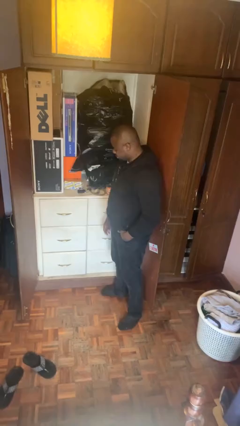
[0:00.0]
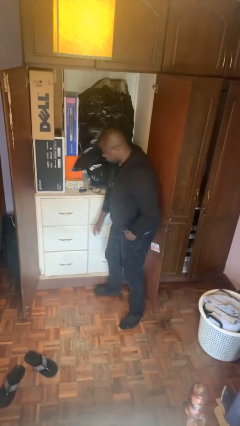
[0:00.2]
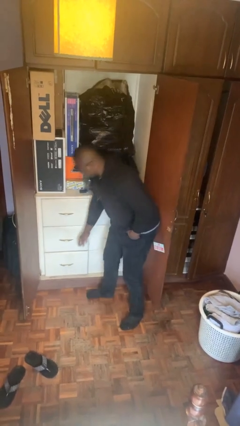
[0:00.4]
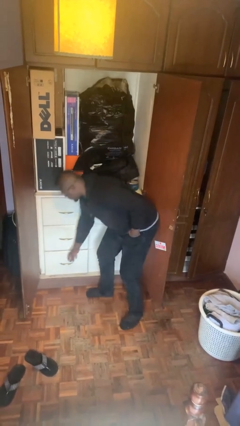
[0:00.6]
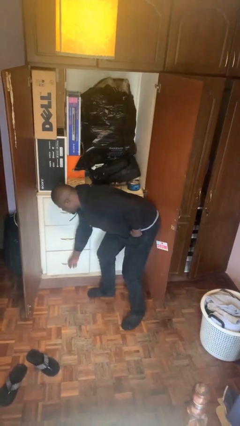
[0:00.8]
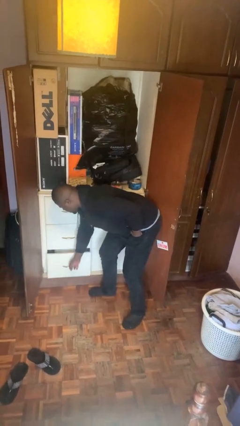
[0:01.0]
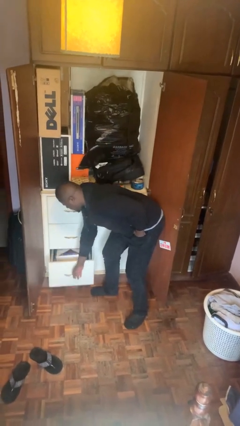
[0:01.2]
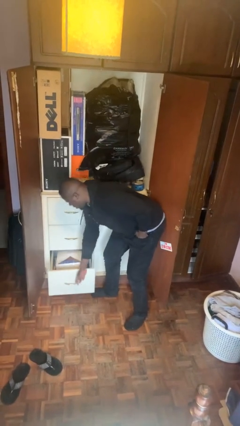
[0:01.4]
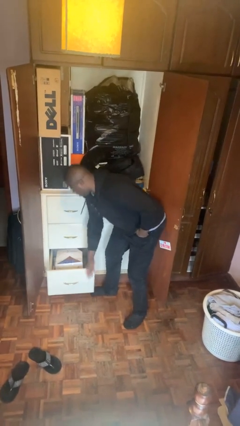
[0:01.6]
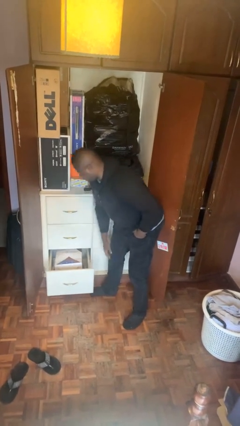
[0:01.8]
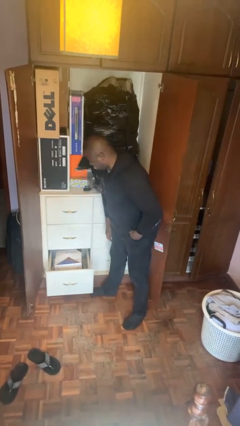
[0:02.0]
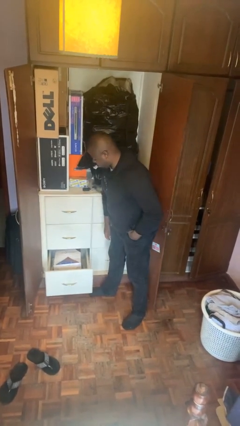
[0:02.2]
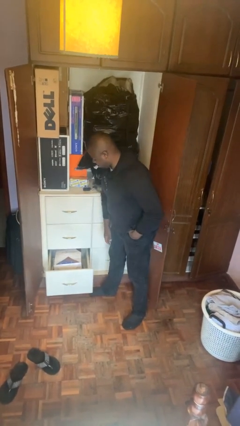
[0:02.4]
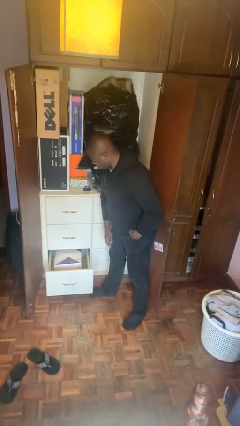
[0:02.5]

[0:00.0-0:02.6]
person opens dresser drawer

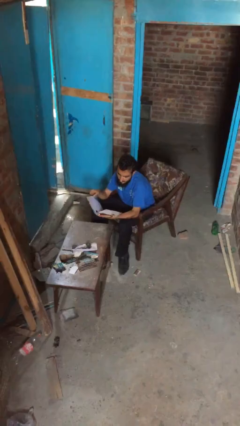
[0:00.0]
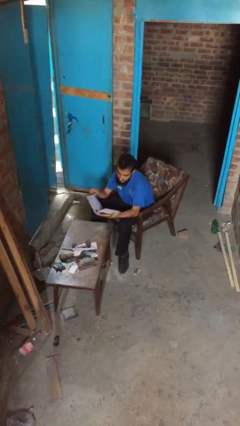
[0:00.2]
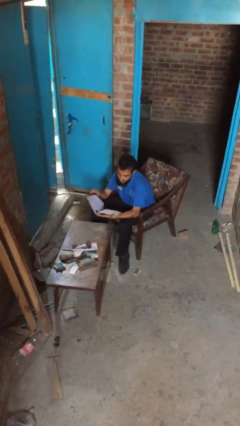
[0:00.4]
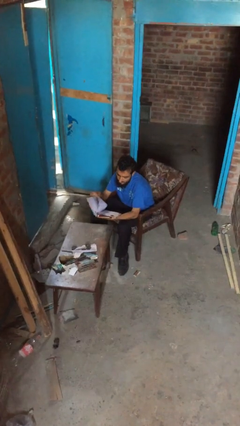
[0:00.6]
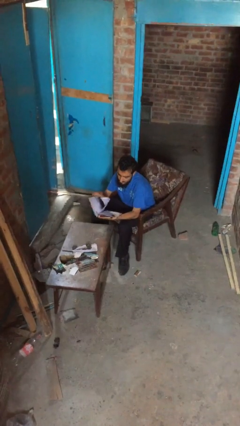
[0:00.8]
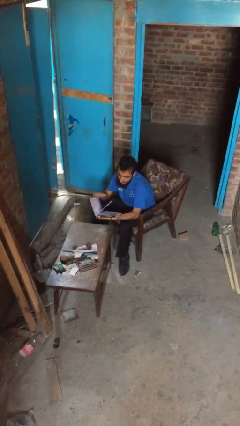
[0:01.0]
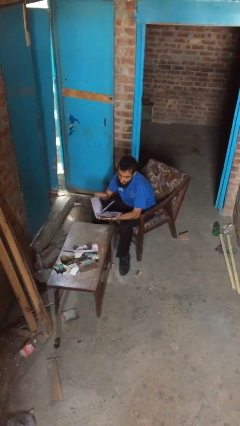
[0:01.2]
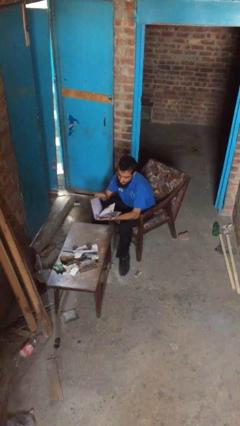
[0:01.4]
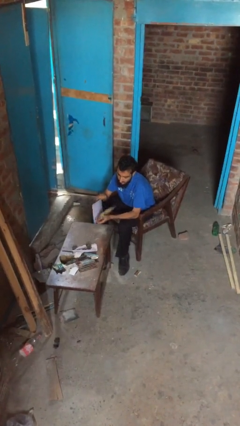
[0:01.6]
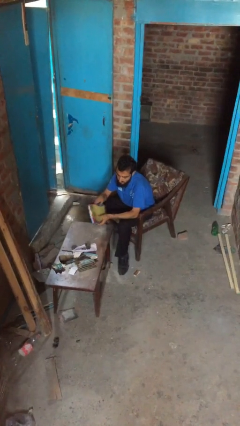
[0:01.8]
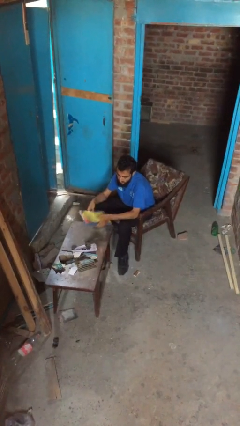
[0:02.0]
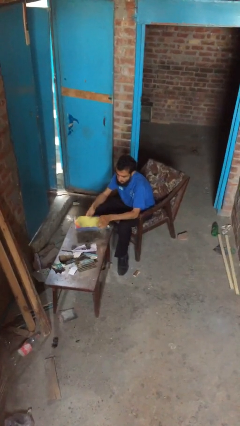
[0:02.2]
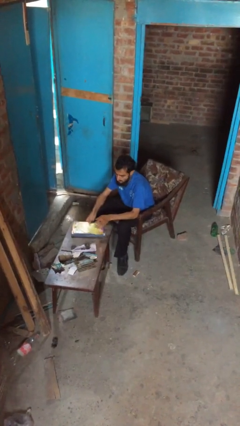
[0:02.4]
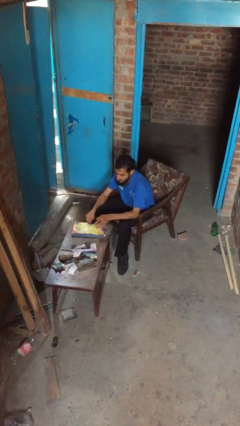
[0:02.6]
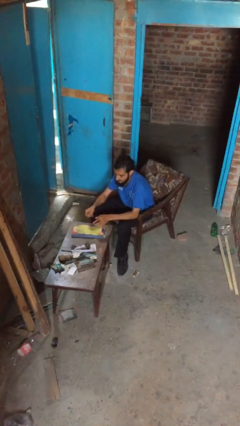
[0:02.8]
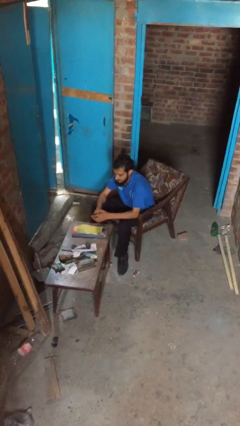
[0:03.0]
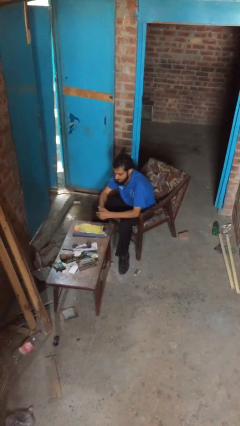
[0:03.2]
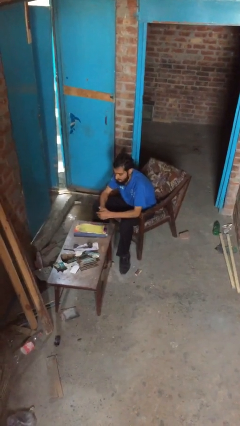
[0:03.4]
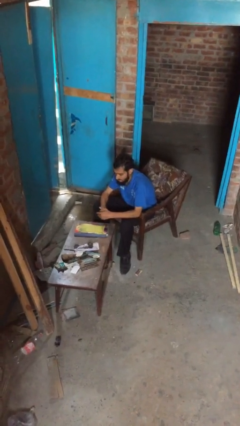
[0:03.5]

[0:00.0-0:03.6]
person puts down object on table

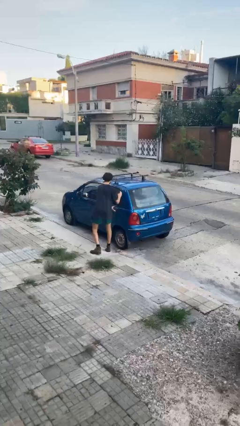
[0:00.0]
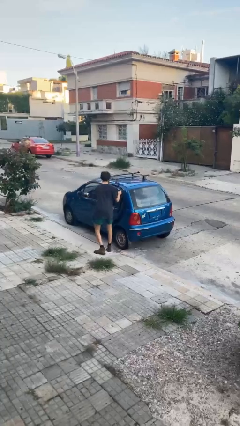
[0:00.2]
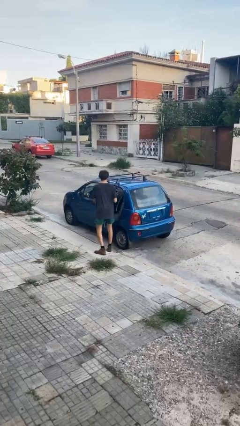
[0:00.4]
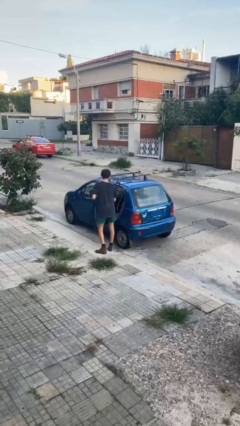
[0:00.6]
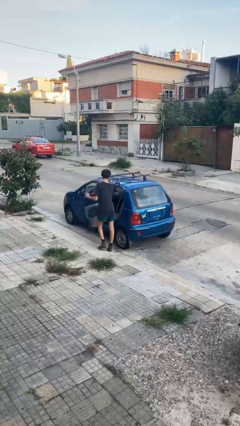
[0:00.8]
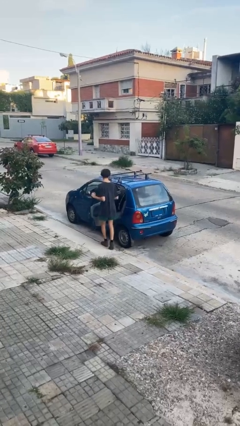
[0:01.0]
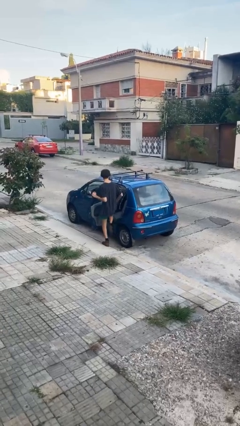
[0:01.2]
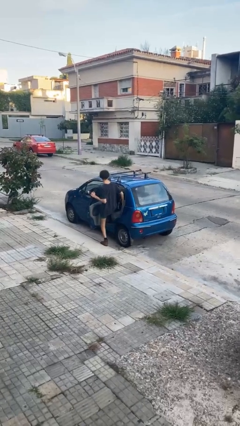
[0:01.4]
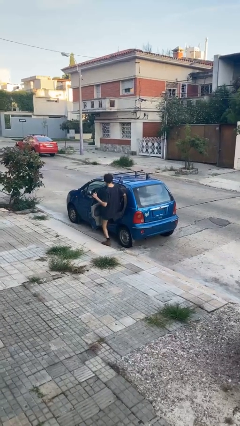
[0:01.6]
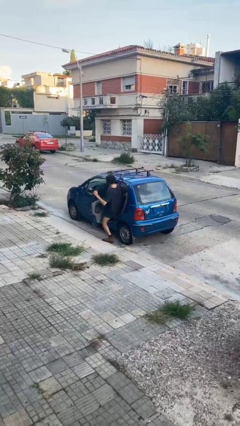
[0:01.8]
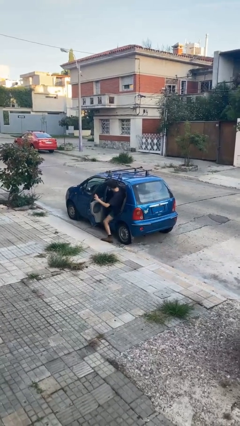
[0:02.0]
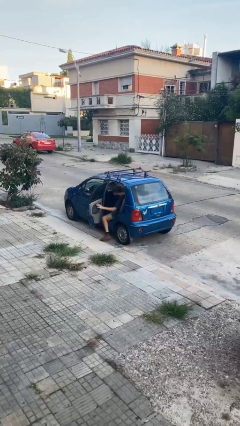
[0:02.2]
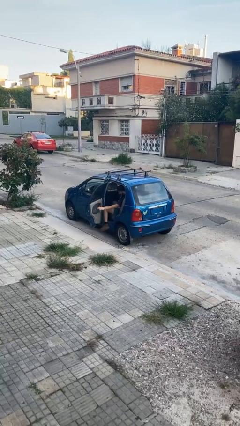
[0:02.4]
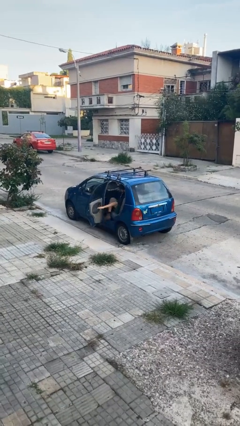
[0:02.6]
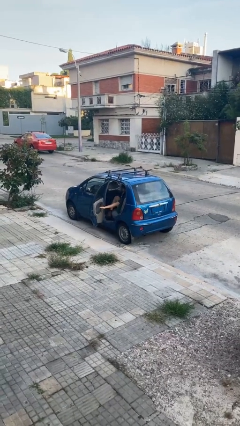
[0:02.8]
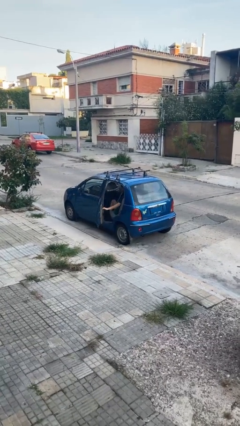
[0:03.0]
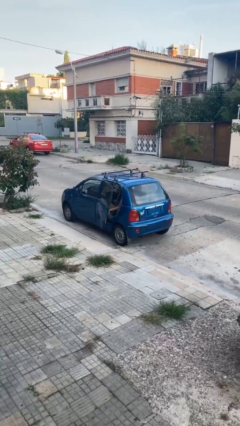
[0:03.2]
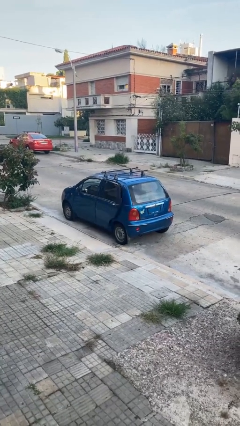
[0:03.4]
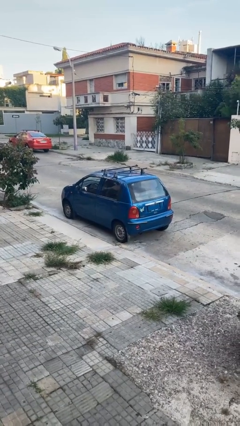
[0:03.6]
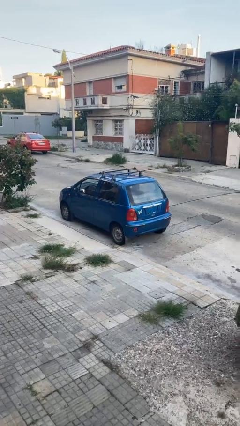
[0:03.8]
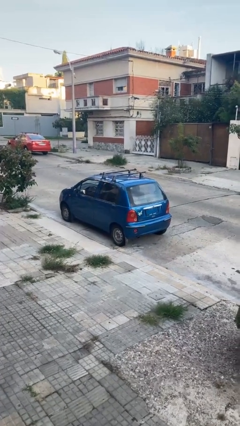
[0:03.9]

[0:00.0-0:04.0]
car picks up person

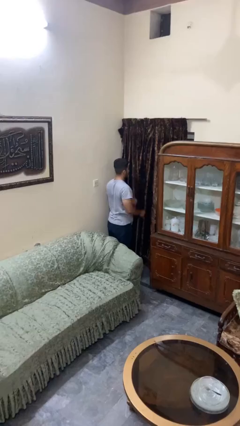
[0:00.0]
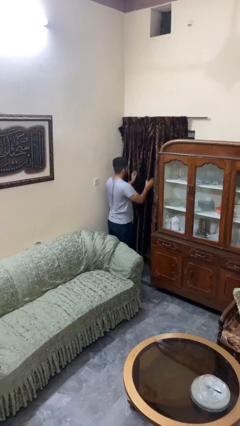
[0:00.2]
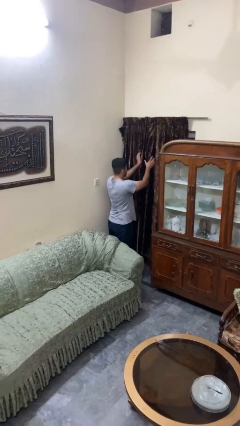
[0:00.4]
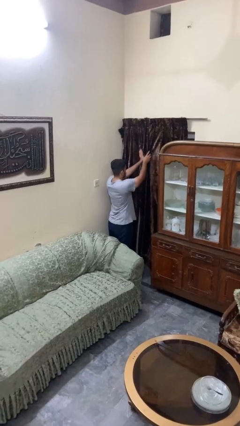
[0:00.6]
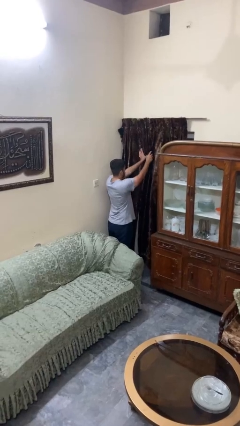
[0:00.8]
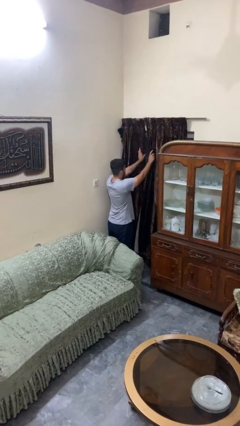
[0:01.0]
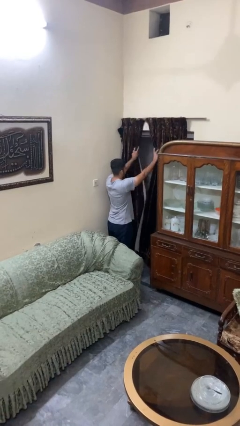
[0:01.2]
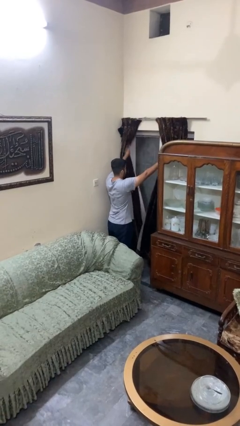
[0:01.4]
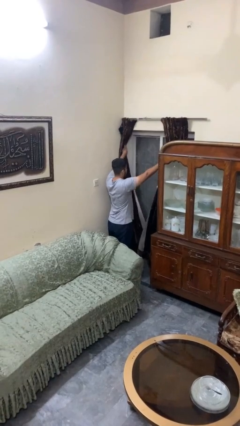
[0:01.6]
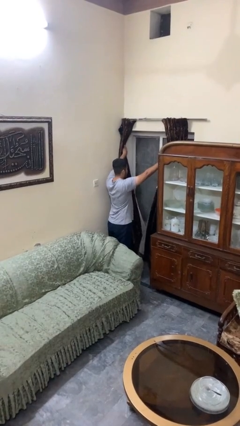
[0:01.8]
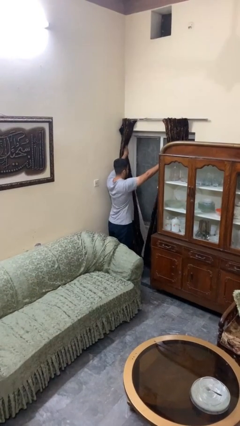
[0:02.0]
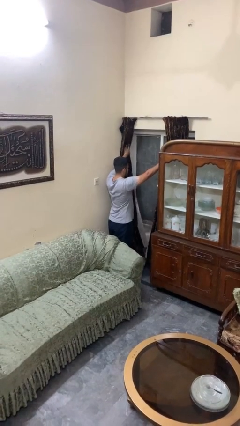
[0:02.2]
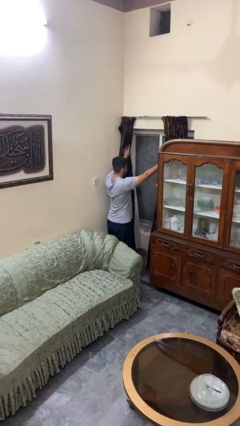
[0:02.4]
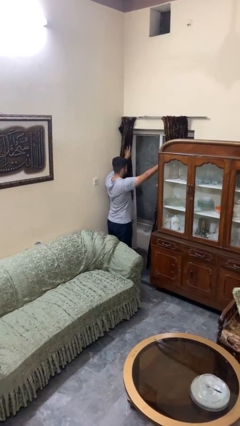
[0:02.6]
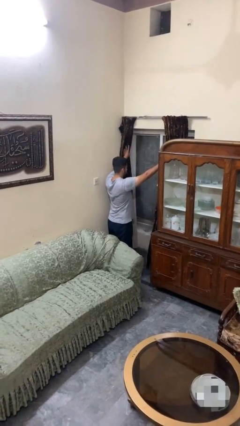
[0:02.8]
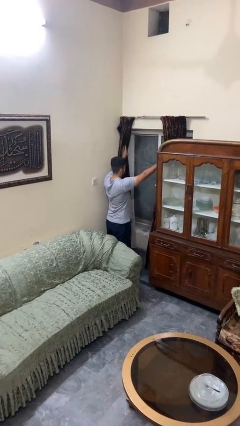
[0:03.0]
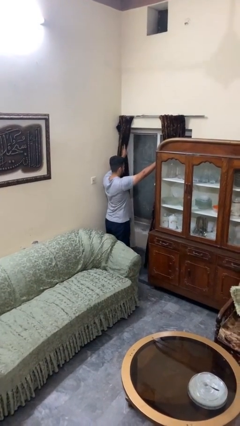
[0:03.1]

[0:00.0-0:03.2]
person opens curtains

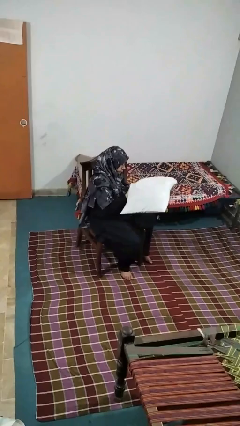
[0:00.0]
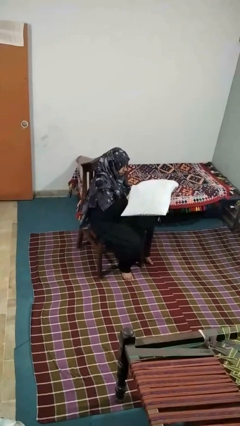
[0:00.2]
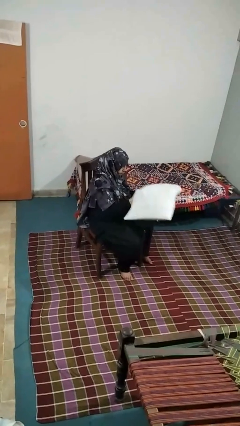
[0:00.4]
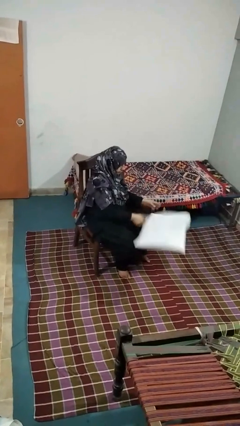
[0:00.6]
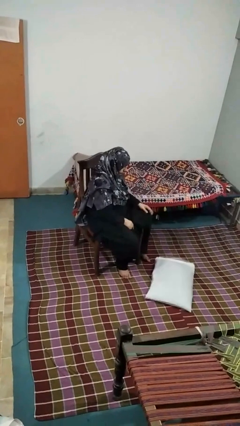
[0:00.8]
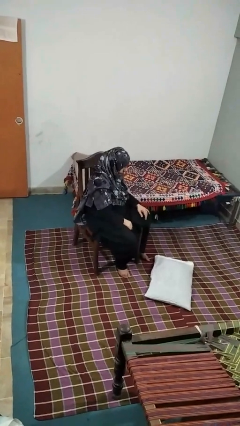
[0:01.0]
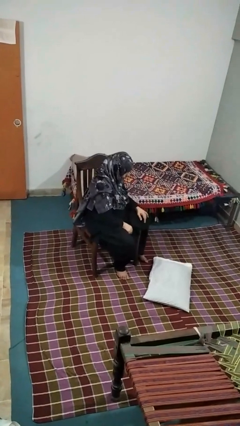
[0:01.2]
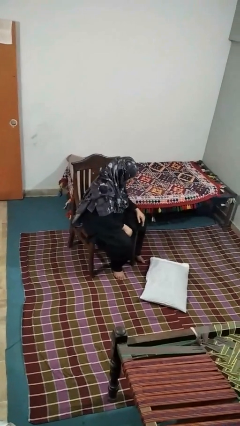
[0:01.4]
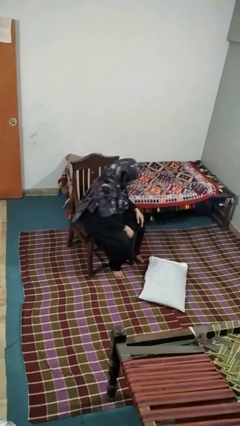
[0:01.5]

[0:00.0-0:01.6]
person drops object

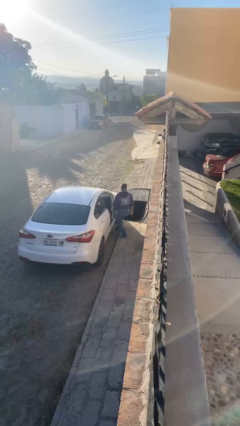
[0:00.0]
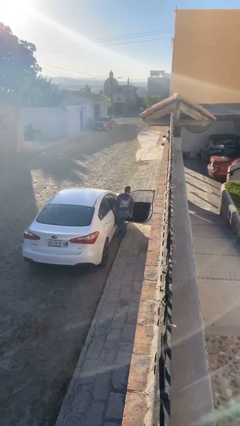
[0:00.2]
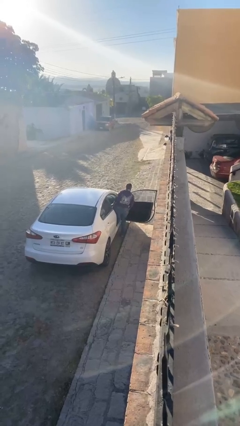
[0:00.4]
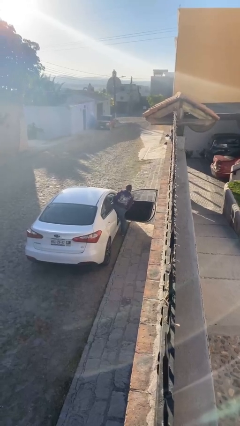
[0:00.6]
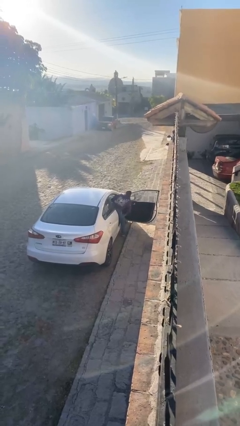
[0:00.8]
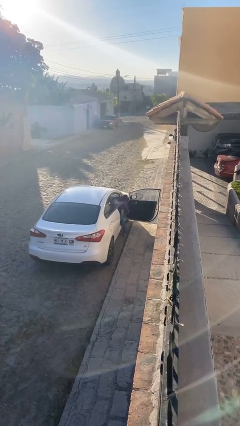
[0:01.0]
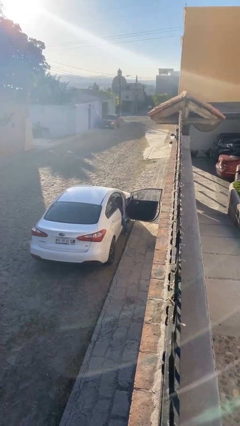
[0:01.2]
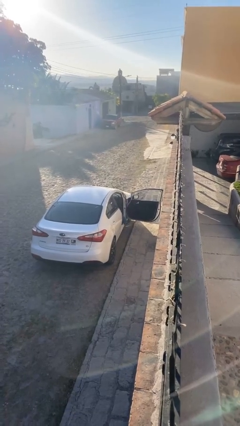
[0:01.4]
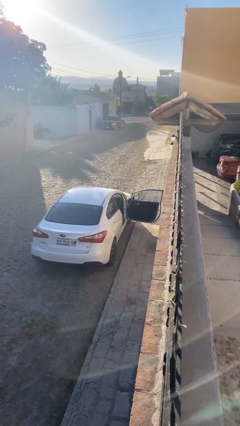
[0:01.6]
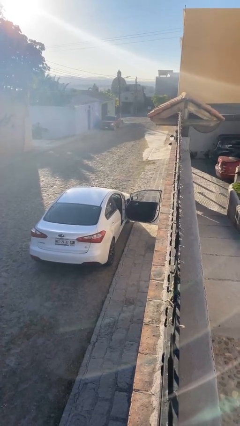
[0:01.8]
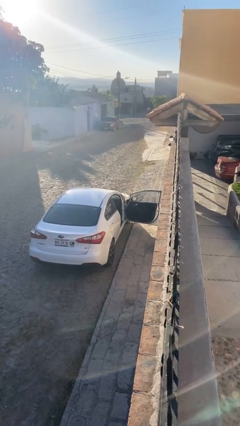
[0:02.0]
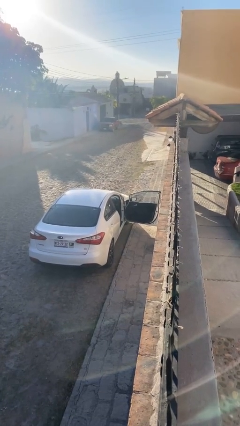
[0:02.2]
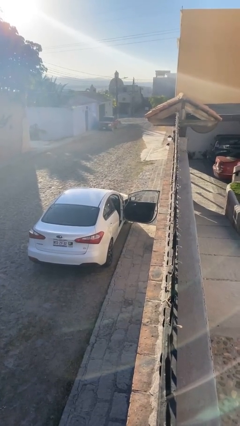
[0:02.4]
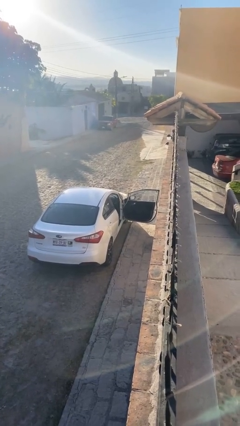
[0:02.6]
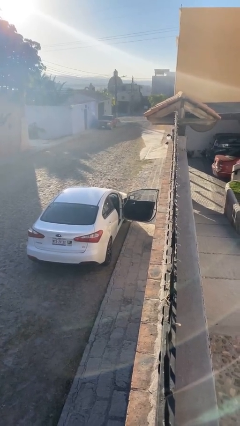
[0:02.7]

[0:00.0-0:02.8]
person enters car
